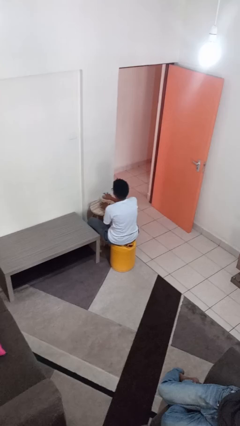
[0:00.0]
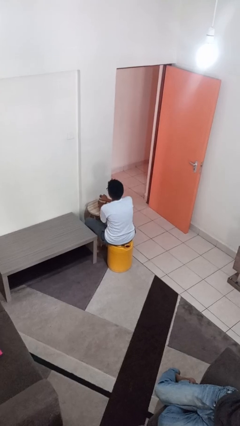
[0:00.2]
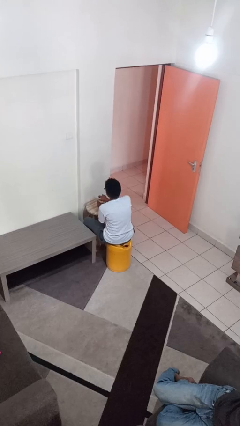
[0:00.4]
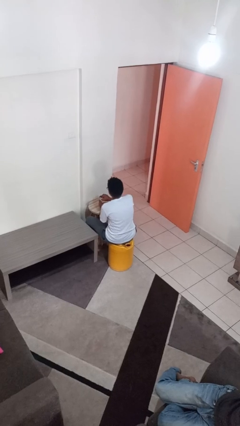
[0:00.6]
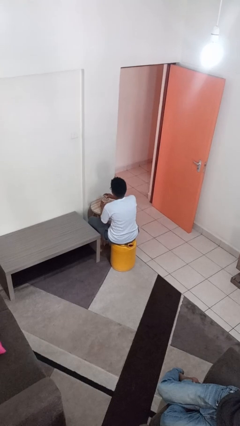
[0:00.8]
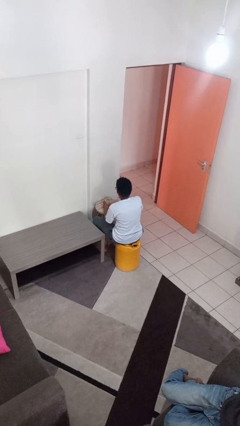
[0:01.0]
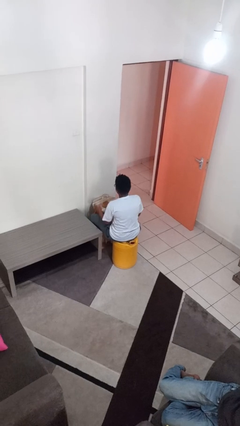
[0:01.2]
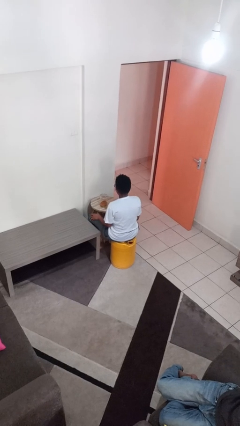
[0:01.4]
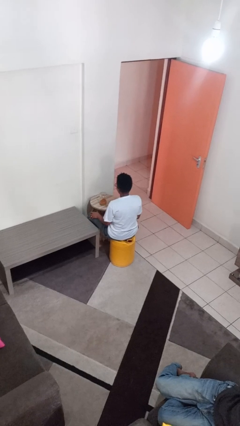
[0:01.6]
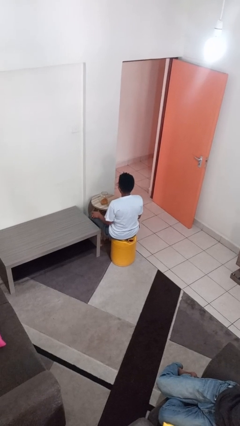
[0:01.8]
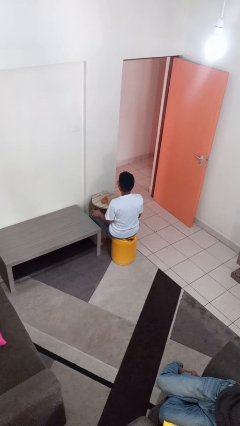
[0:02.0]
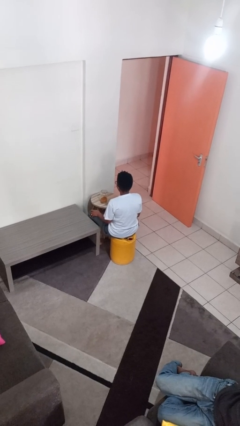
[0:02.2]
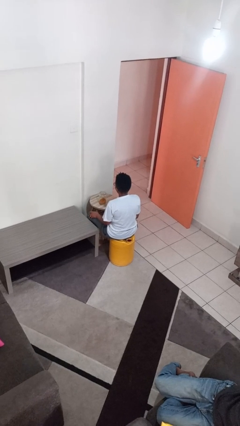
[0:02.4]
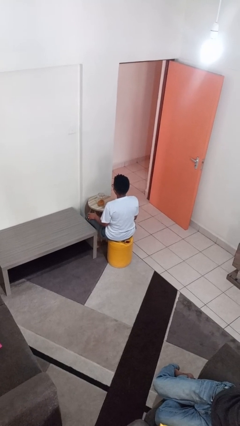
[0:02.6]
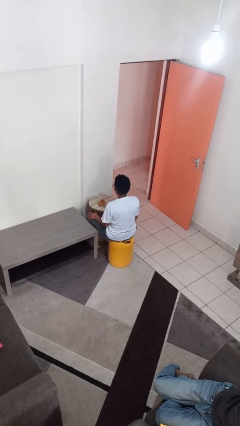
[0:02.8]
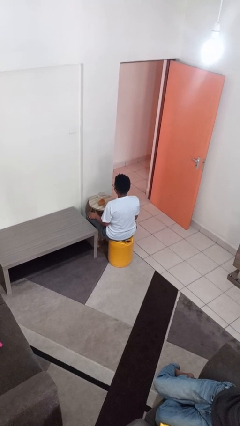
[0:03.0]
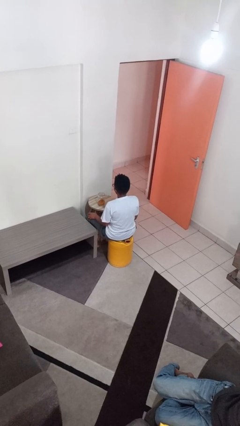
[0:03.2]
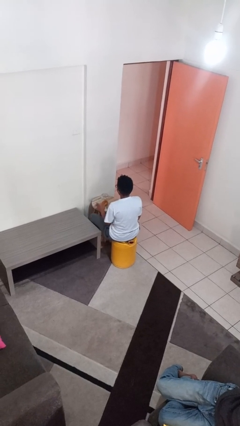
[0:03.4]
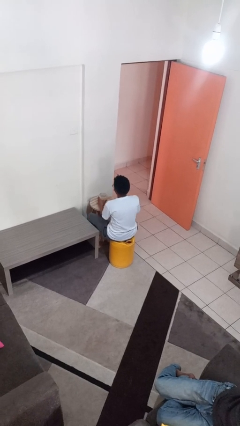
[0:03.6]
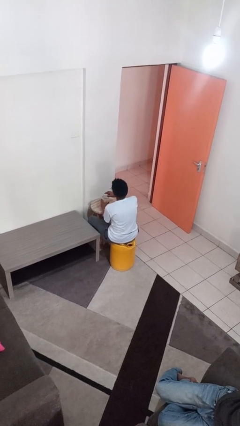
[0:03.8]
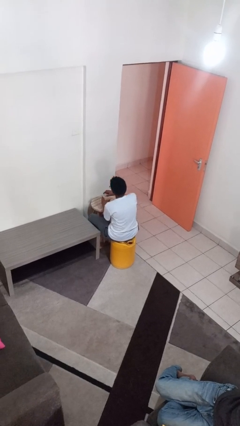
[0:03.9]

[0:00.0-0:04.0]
person opens jar

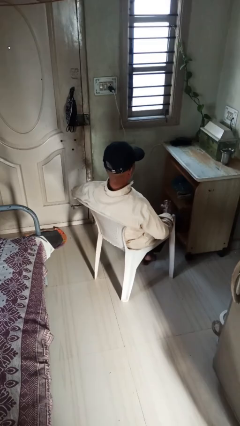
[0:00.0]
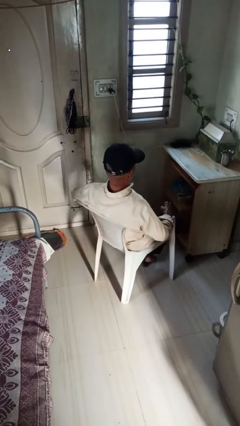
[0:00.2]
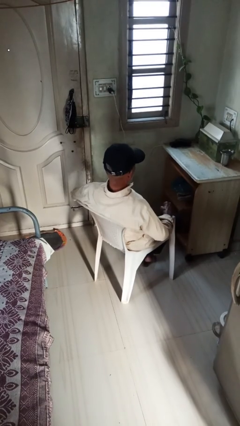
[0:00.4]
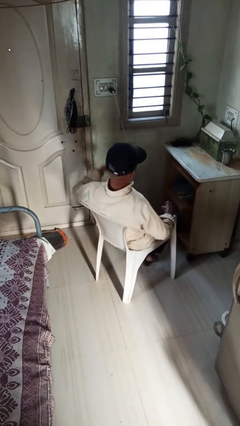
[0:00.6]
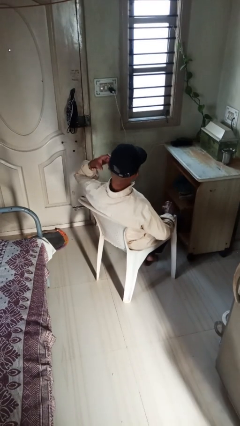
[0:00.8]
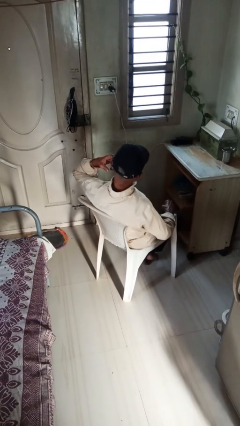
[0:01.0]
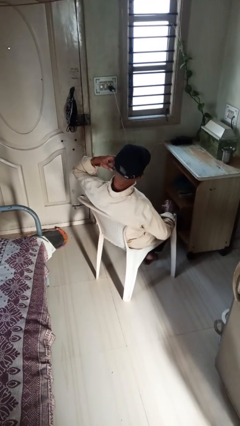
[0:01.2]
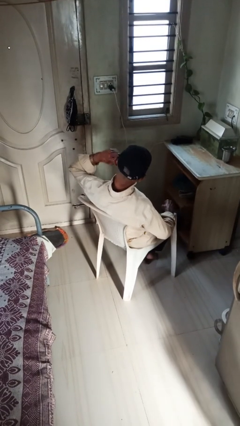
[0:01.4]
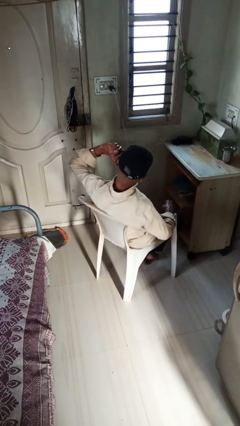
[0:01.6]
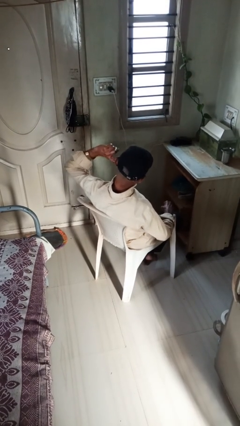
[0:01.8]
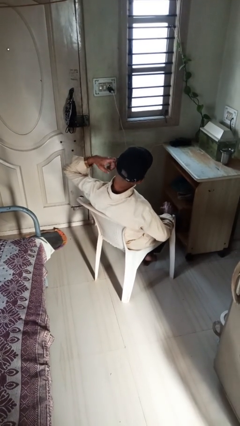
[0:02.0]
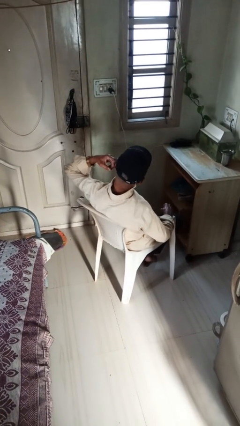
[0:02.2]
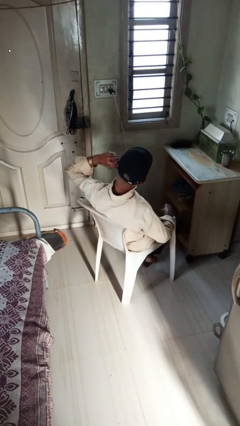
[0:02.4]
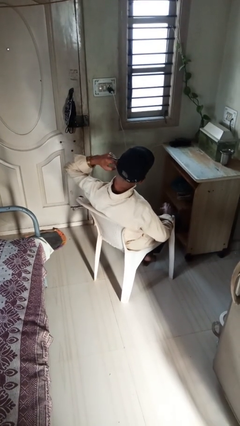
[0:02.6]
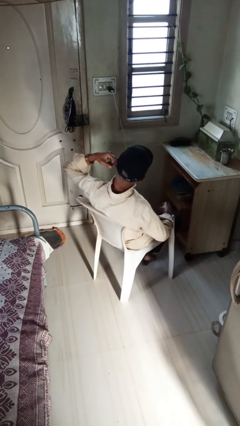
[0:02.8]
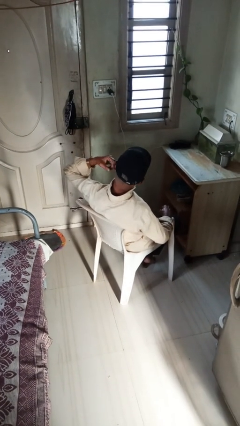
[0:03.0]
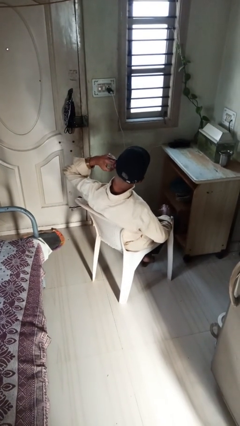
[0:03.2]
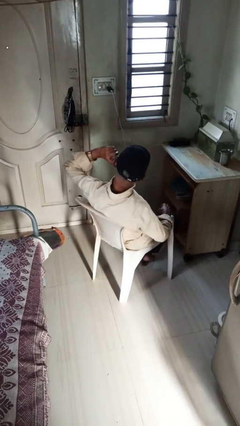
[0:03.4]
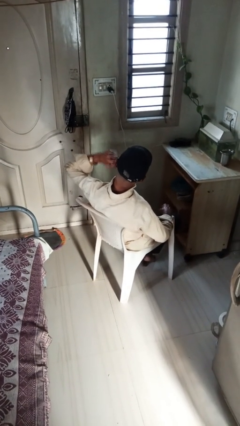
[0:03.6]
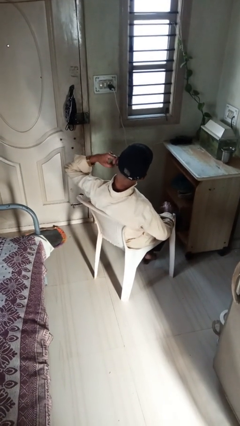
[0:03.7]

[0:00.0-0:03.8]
person puts fingers in ear

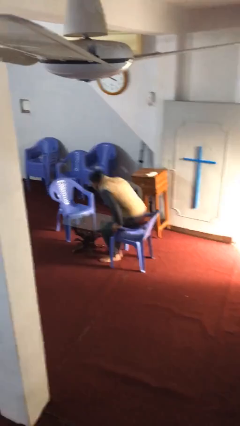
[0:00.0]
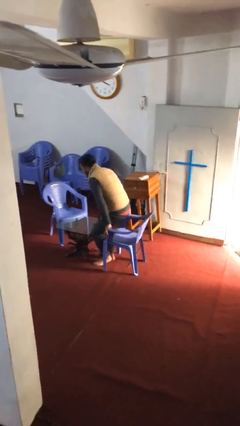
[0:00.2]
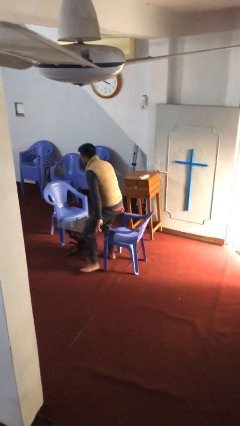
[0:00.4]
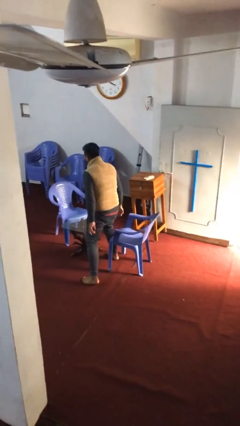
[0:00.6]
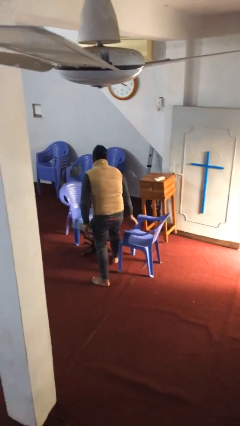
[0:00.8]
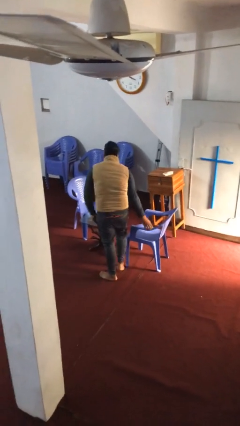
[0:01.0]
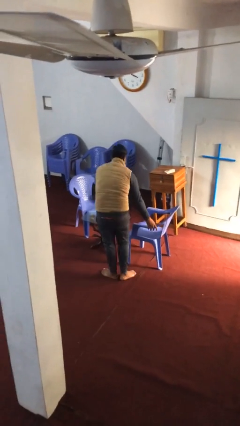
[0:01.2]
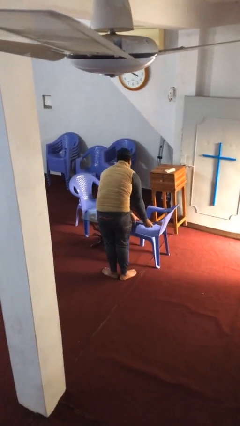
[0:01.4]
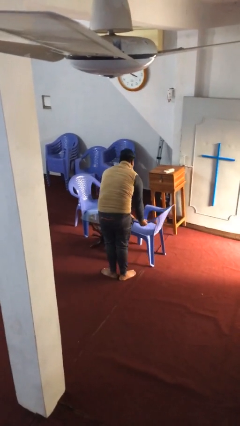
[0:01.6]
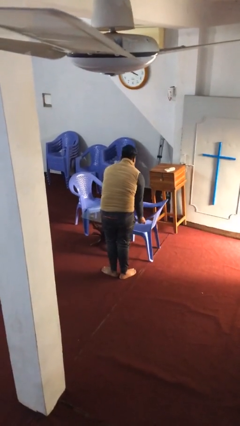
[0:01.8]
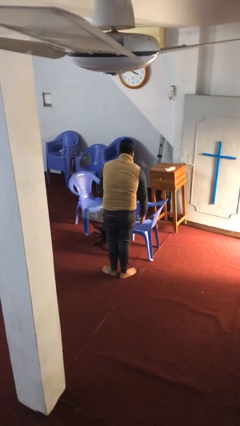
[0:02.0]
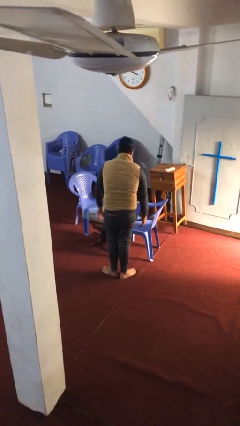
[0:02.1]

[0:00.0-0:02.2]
person stands up

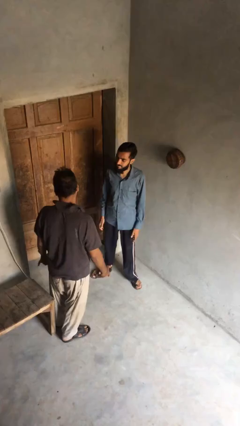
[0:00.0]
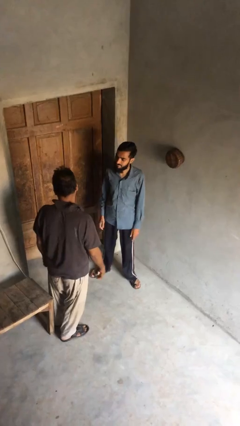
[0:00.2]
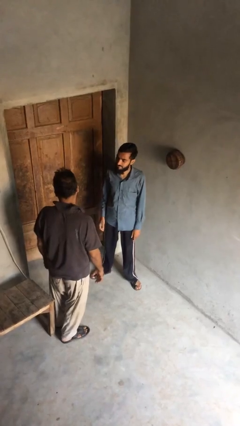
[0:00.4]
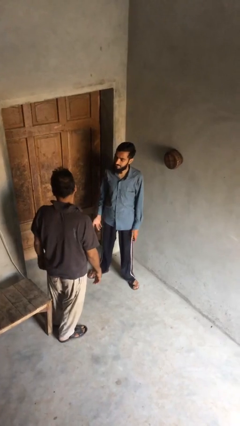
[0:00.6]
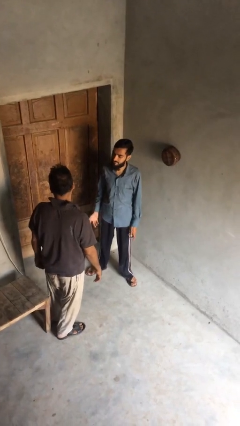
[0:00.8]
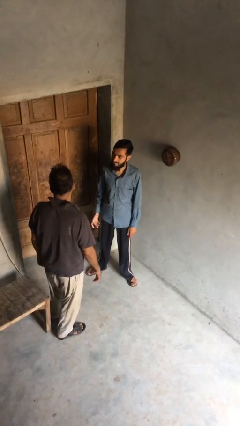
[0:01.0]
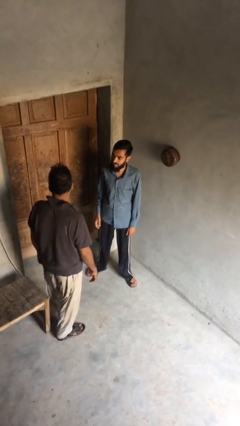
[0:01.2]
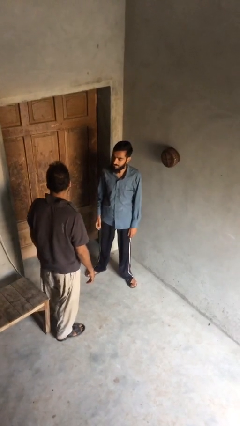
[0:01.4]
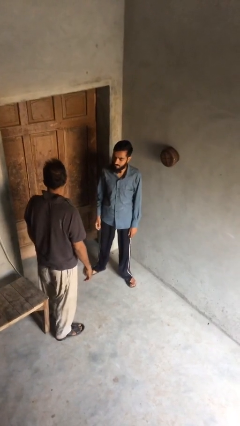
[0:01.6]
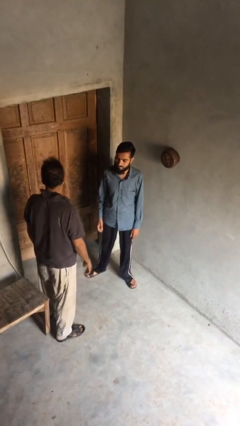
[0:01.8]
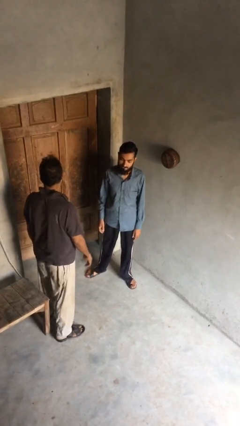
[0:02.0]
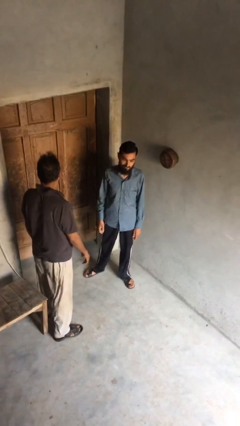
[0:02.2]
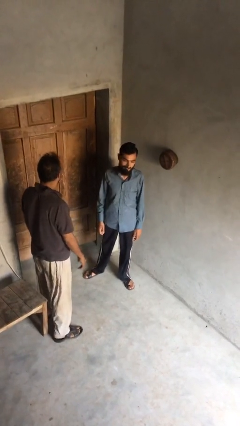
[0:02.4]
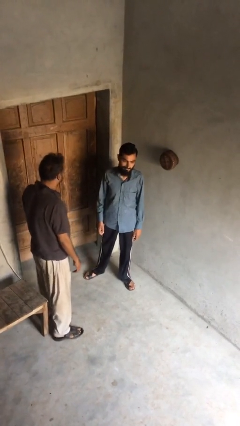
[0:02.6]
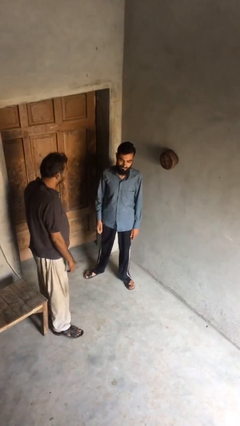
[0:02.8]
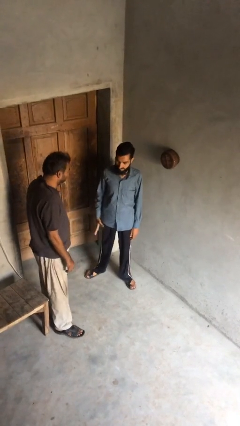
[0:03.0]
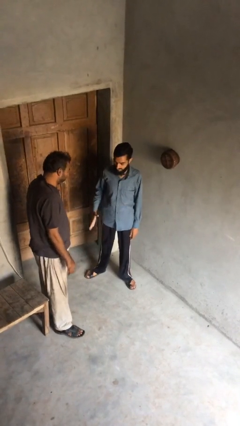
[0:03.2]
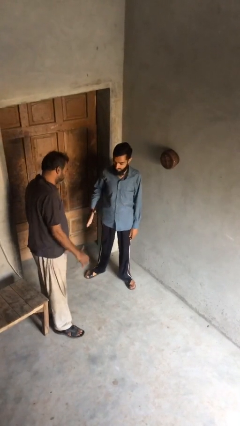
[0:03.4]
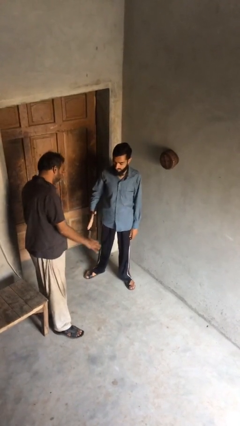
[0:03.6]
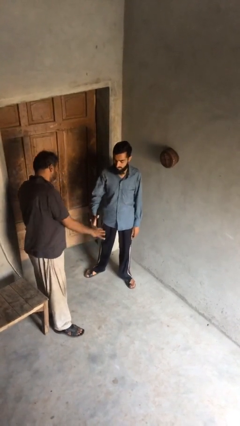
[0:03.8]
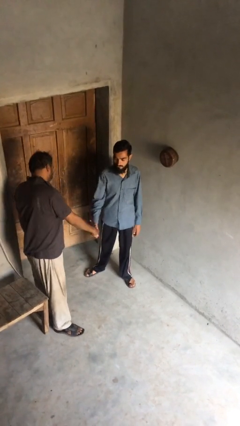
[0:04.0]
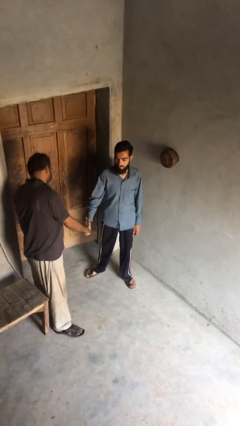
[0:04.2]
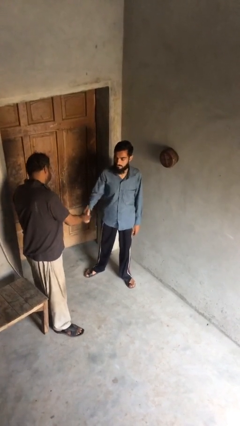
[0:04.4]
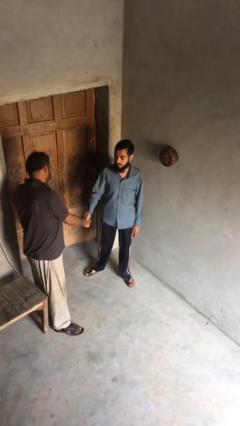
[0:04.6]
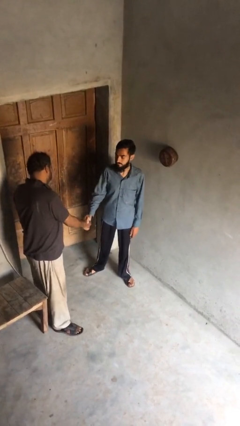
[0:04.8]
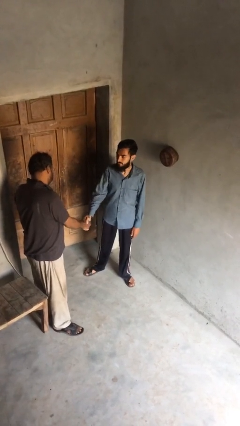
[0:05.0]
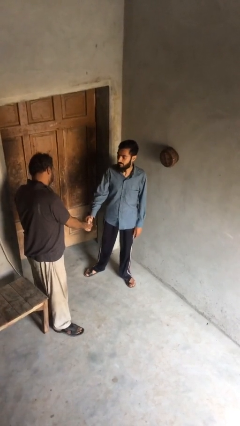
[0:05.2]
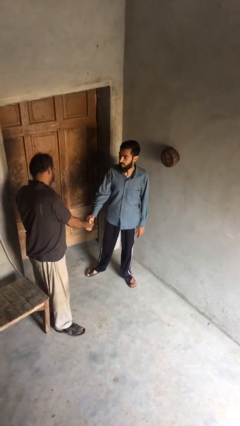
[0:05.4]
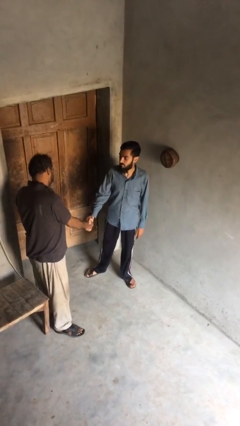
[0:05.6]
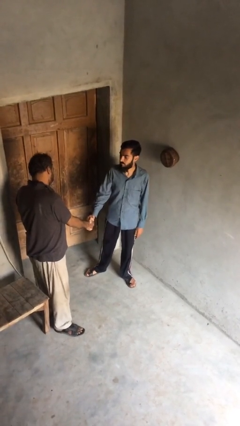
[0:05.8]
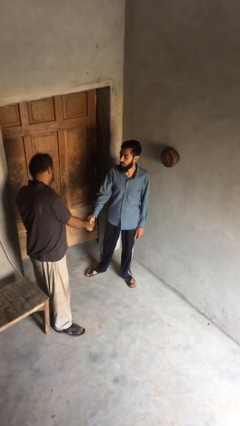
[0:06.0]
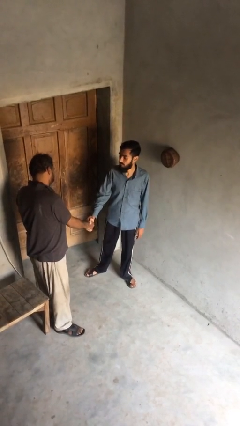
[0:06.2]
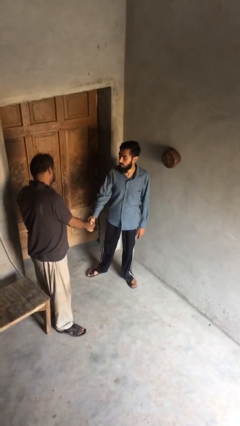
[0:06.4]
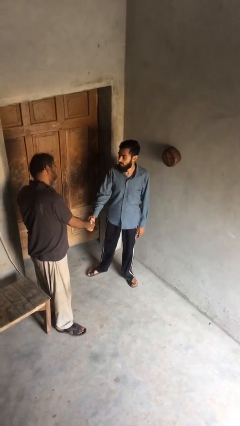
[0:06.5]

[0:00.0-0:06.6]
person shakes hand

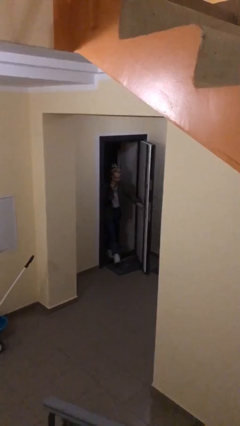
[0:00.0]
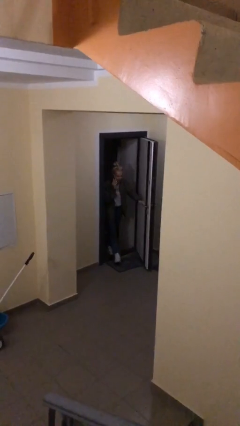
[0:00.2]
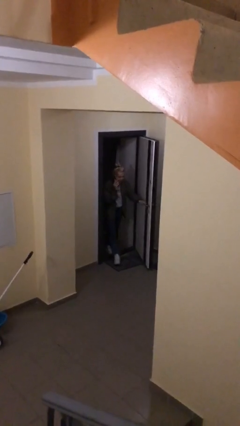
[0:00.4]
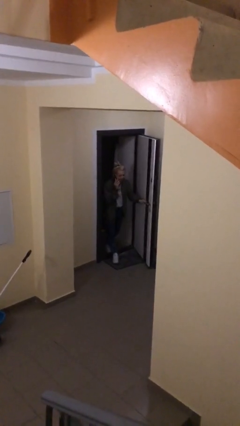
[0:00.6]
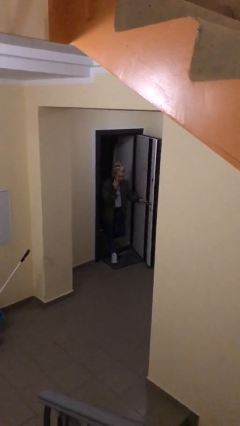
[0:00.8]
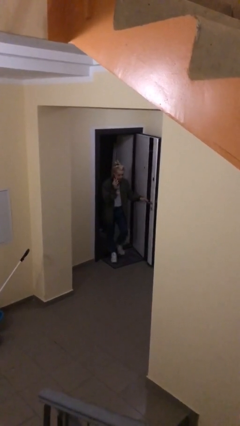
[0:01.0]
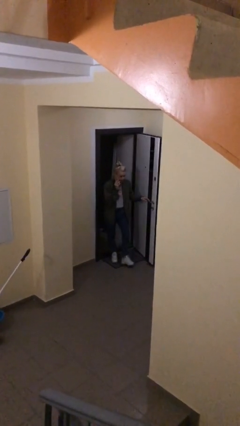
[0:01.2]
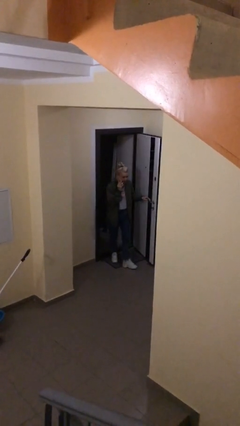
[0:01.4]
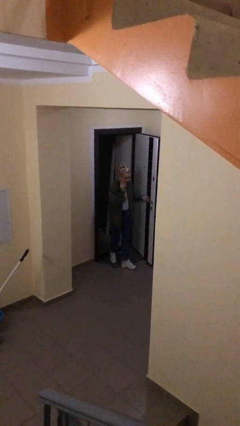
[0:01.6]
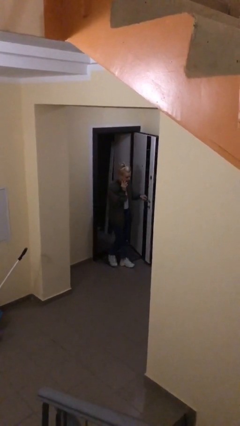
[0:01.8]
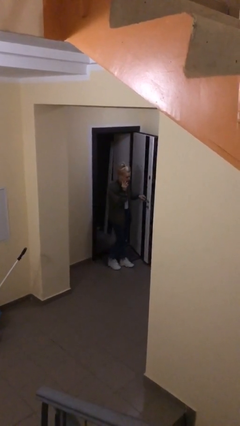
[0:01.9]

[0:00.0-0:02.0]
person enters scene through structure
